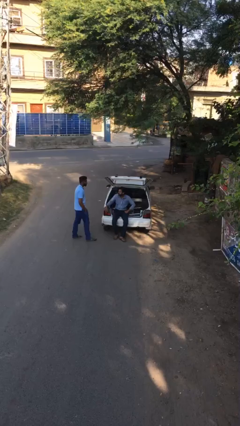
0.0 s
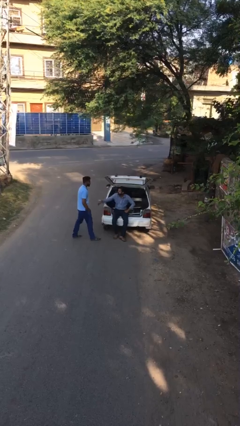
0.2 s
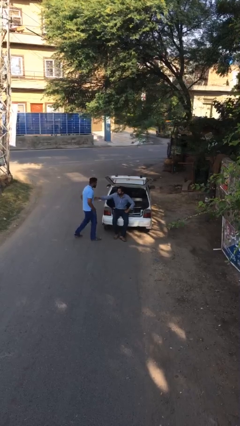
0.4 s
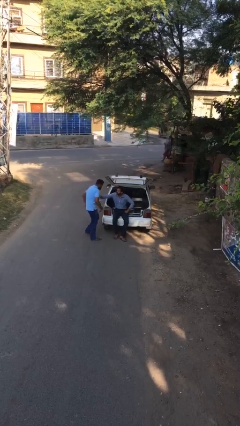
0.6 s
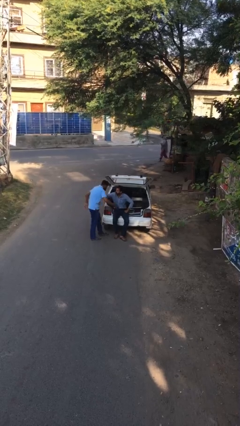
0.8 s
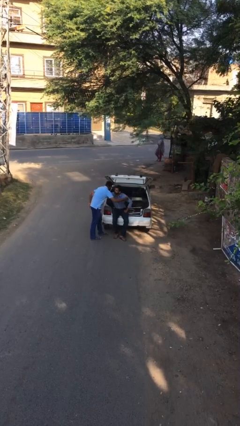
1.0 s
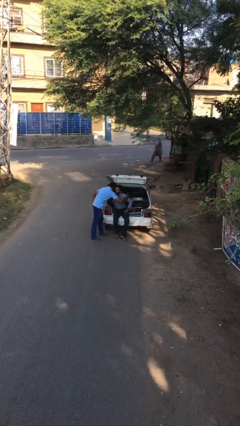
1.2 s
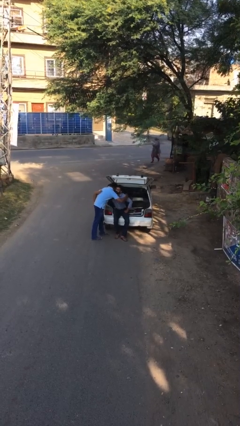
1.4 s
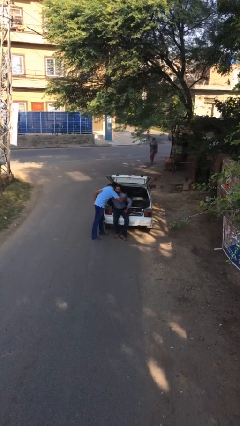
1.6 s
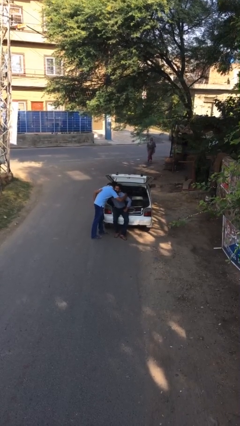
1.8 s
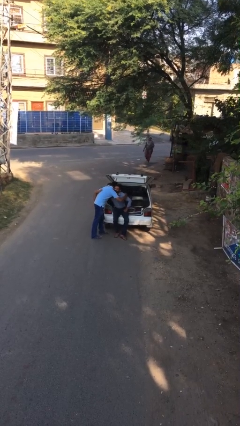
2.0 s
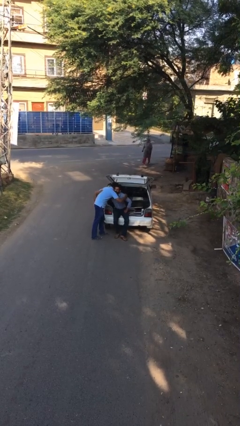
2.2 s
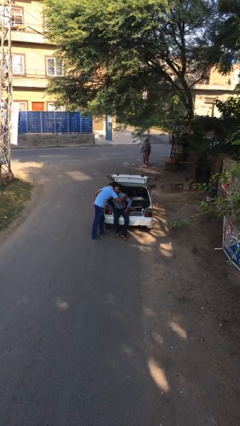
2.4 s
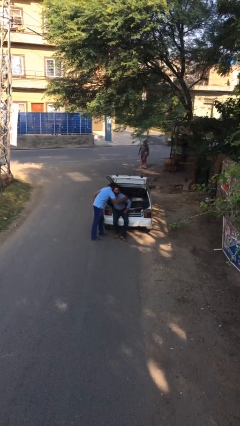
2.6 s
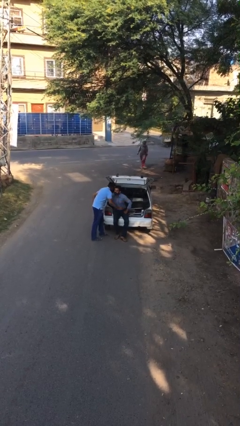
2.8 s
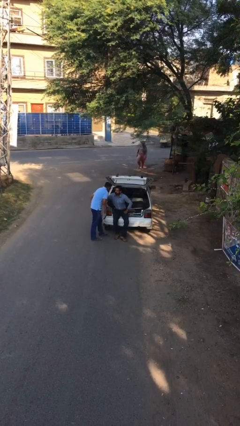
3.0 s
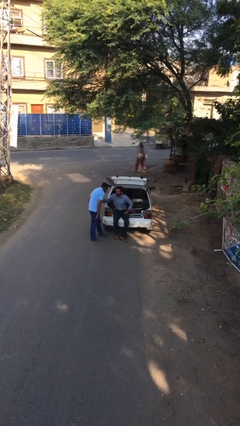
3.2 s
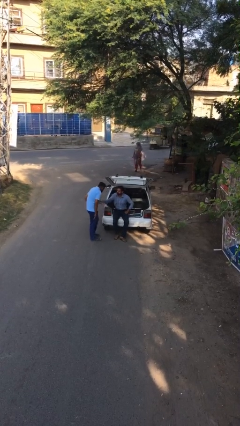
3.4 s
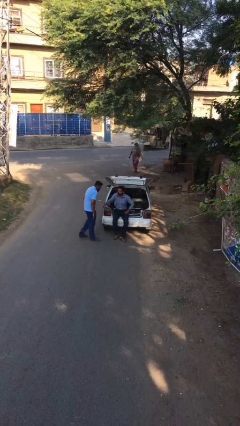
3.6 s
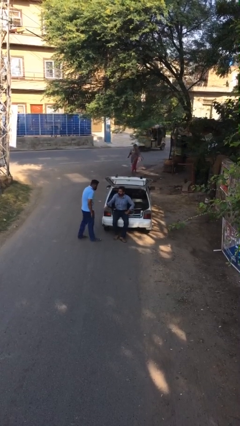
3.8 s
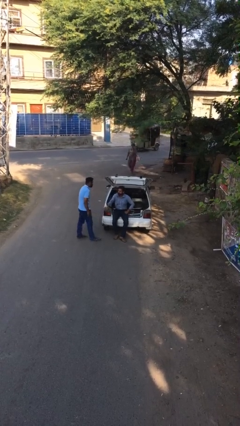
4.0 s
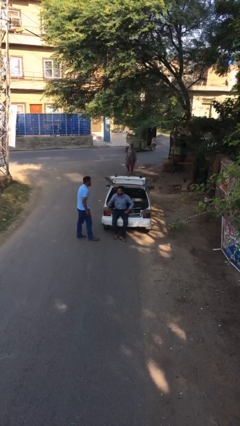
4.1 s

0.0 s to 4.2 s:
person embraces person

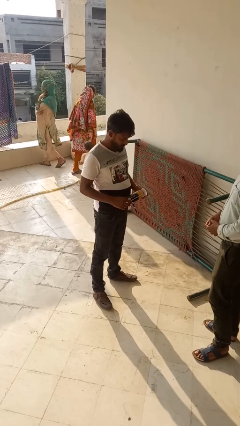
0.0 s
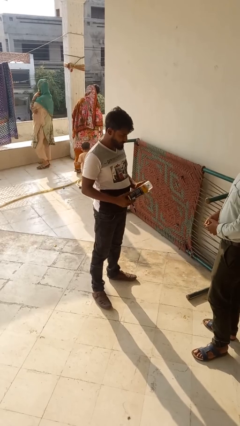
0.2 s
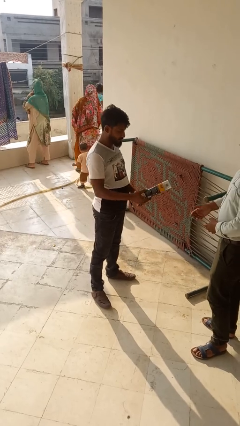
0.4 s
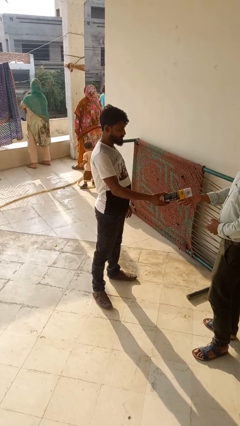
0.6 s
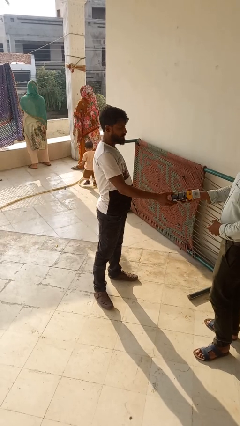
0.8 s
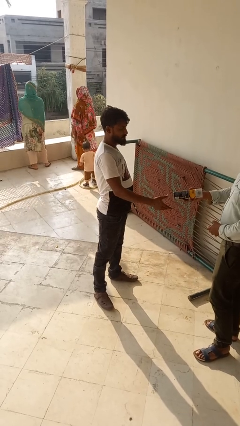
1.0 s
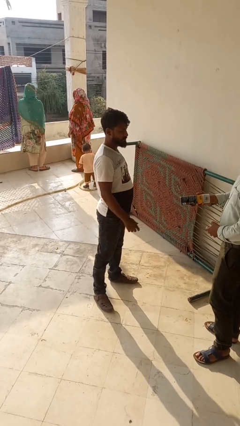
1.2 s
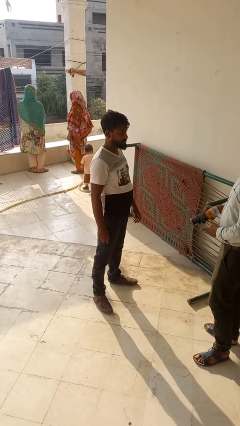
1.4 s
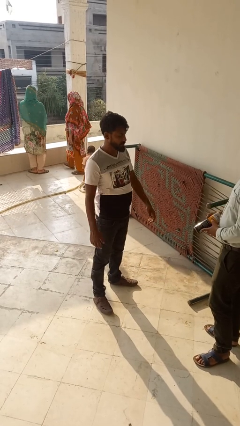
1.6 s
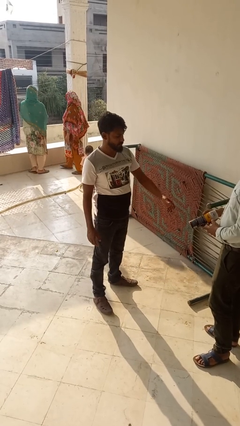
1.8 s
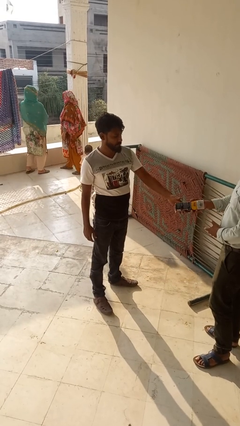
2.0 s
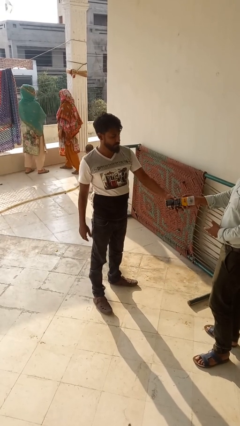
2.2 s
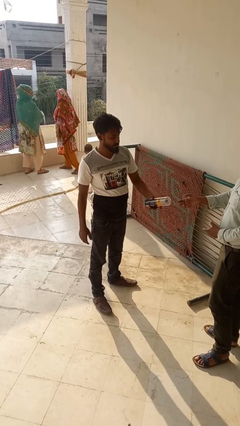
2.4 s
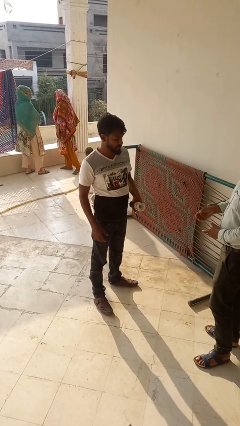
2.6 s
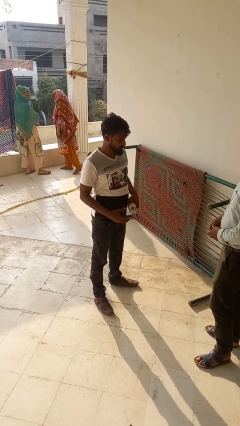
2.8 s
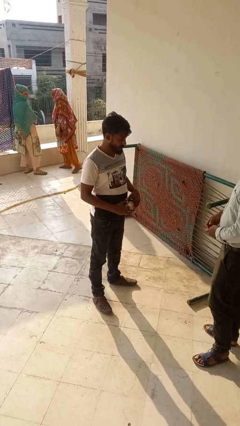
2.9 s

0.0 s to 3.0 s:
person transfers object to person

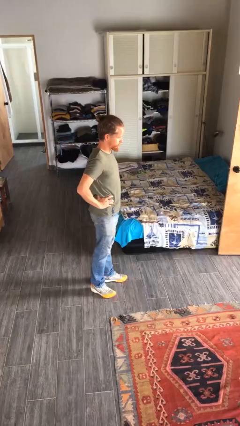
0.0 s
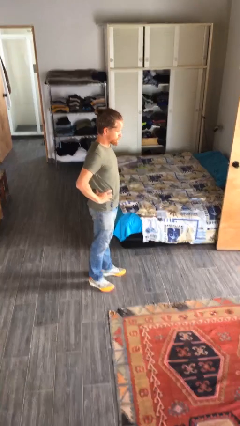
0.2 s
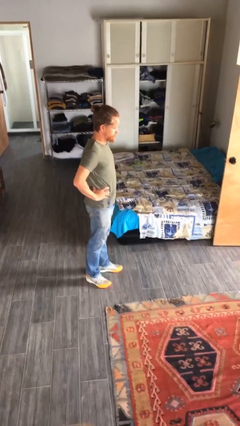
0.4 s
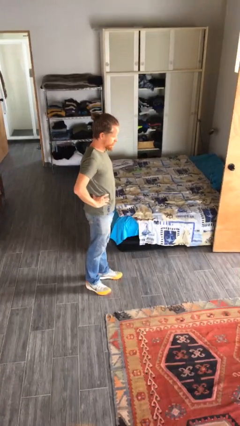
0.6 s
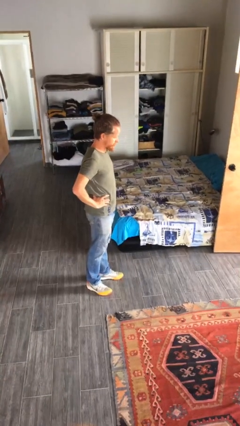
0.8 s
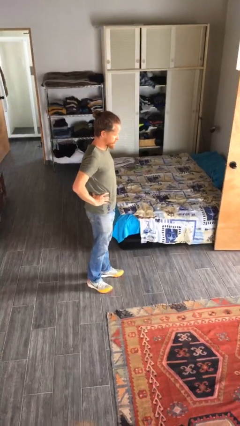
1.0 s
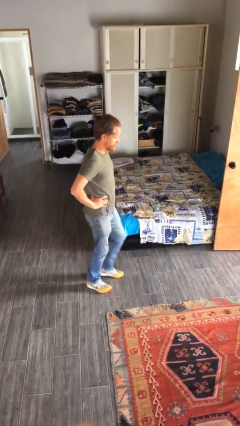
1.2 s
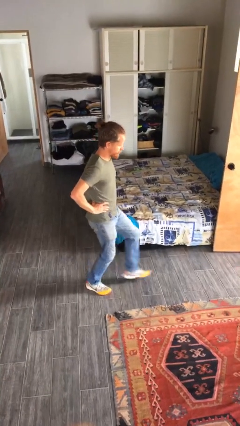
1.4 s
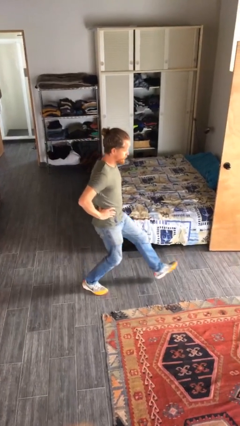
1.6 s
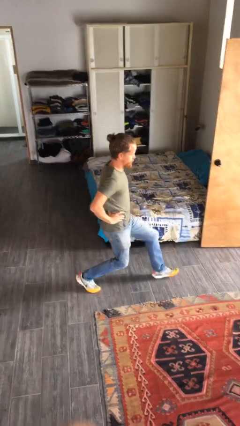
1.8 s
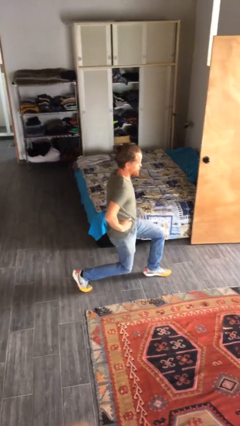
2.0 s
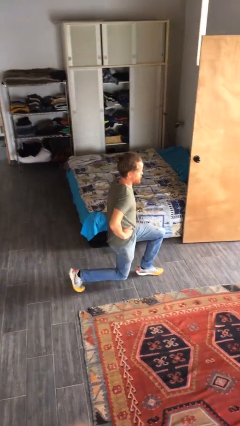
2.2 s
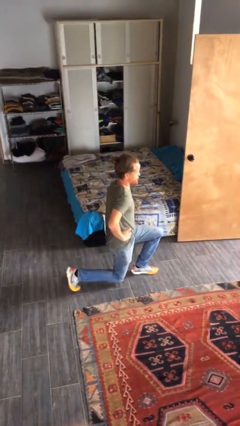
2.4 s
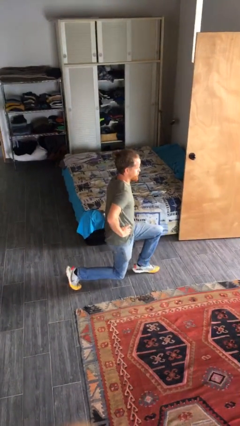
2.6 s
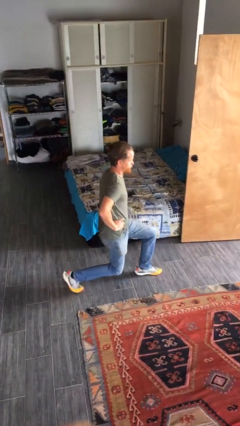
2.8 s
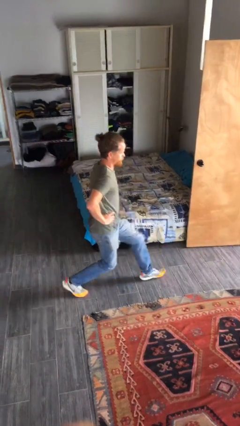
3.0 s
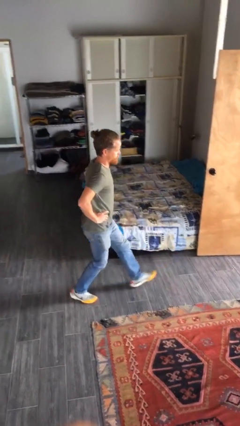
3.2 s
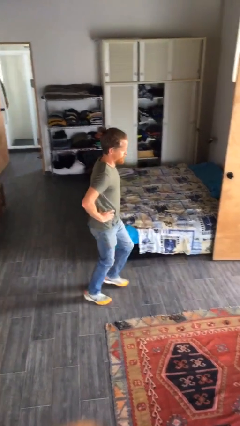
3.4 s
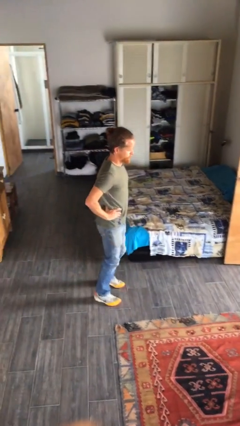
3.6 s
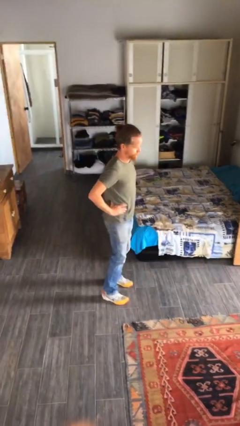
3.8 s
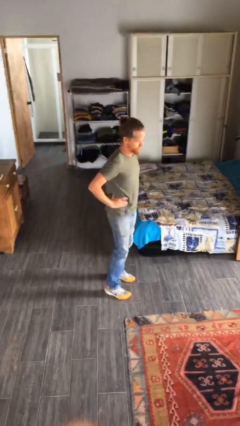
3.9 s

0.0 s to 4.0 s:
person exercises with lunges

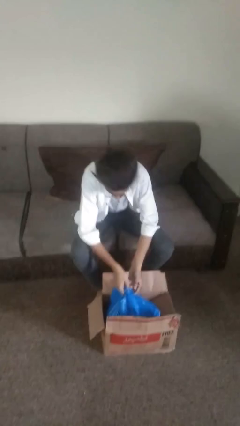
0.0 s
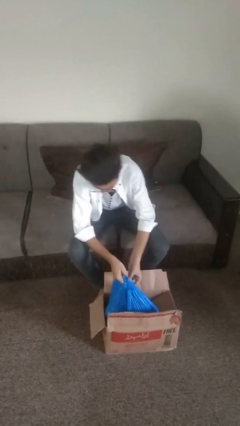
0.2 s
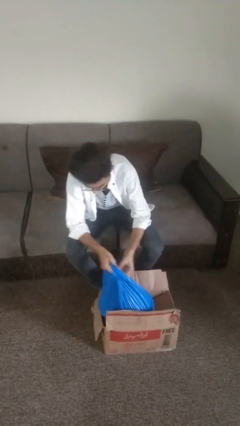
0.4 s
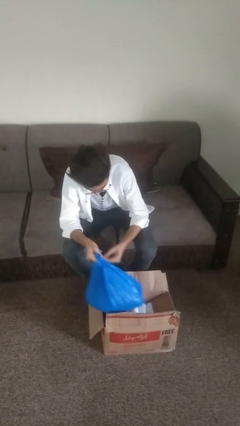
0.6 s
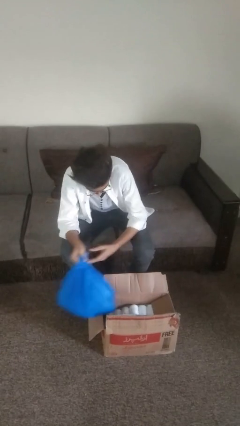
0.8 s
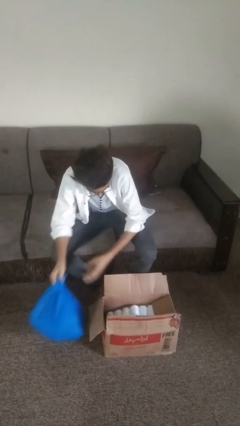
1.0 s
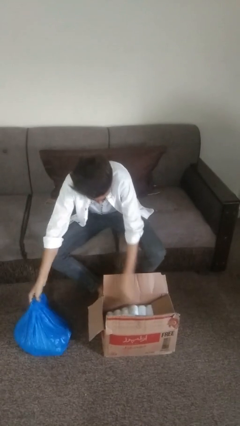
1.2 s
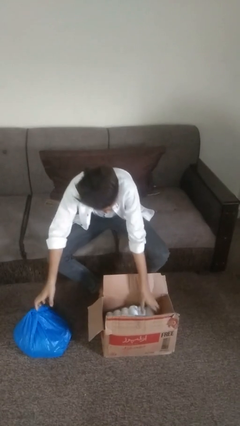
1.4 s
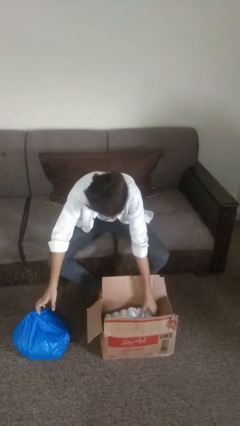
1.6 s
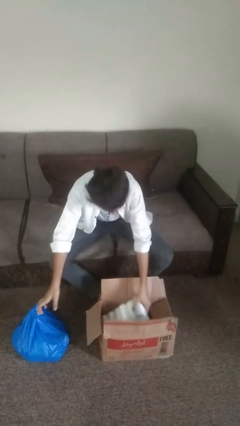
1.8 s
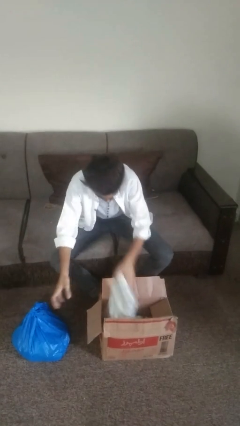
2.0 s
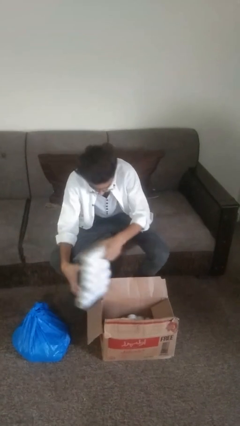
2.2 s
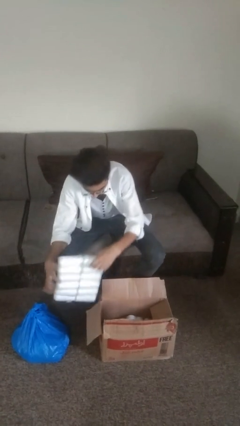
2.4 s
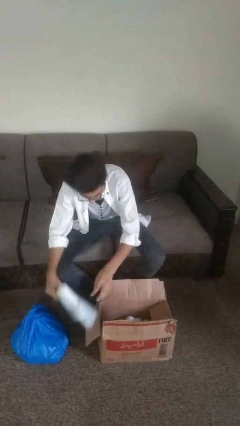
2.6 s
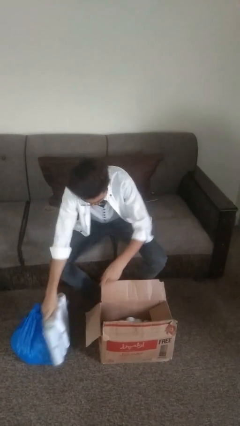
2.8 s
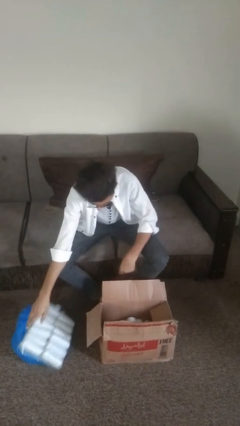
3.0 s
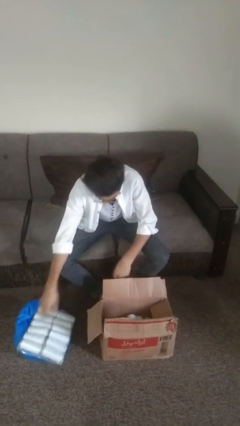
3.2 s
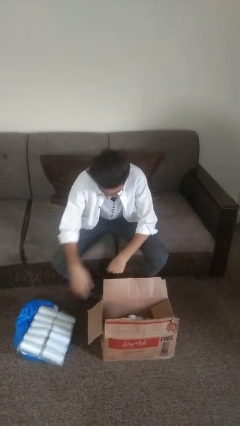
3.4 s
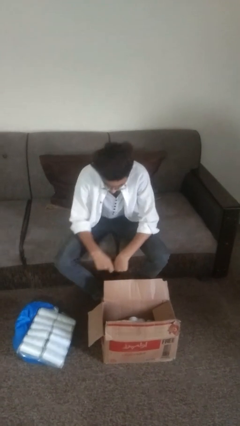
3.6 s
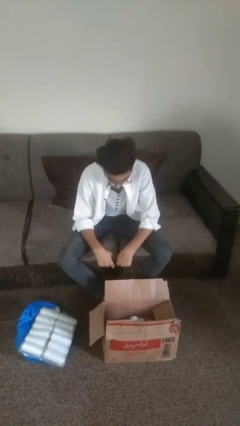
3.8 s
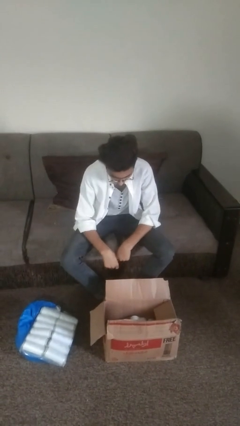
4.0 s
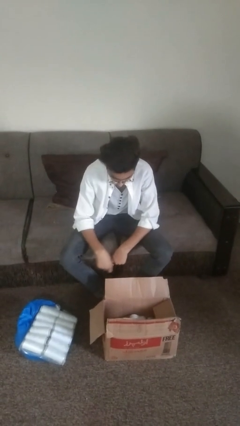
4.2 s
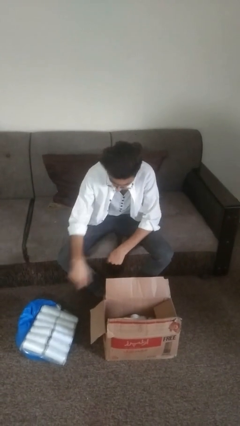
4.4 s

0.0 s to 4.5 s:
person takes object from box

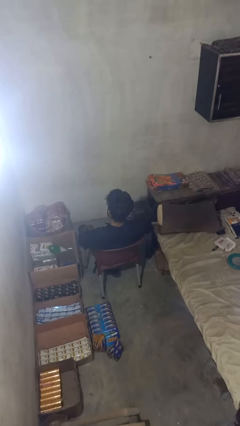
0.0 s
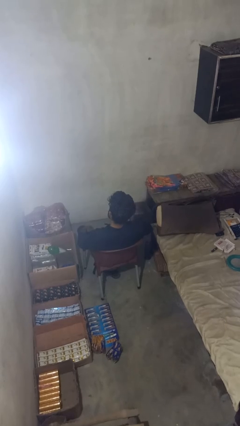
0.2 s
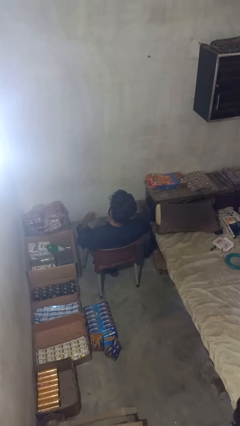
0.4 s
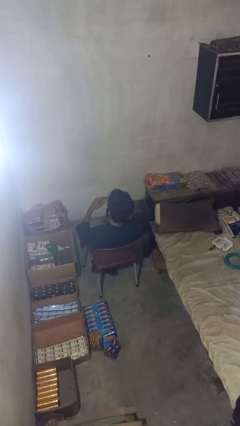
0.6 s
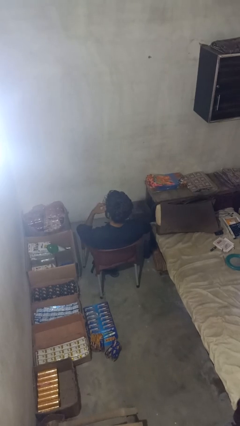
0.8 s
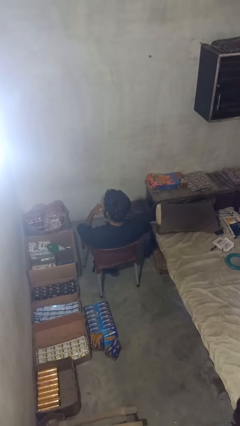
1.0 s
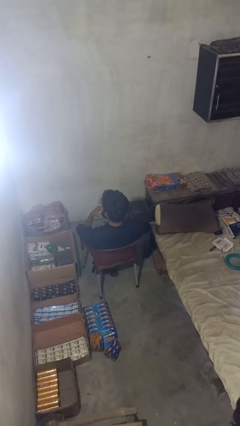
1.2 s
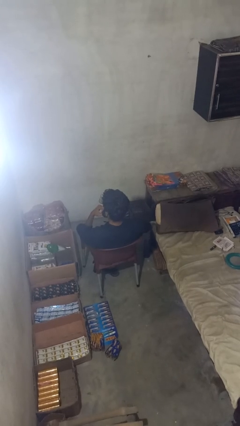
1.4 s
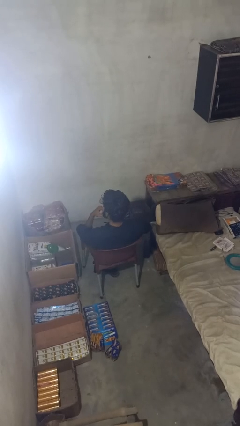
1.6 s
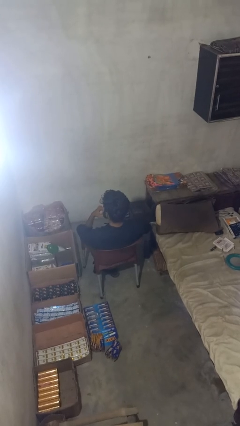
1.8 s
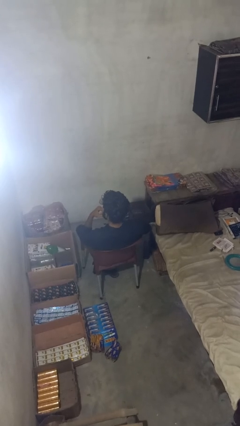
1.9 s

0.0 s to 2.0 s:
person licks fingers
